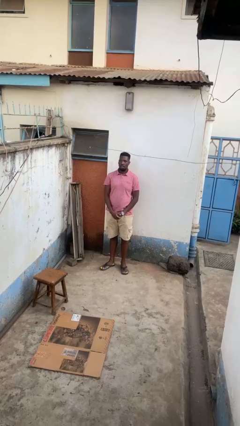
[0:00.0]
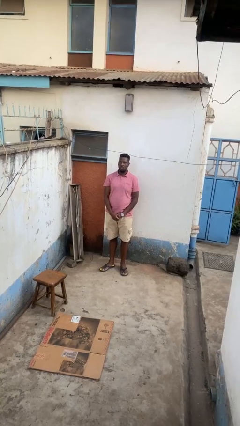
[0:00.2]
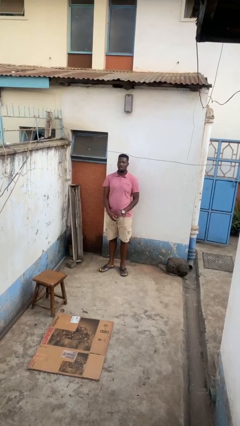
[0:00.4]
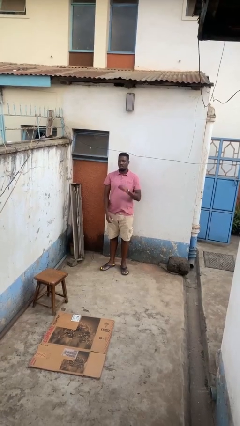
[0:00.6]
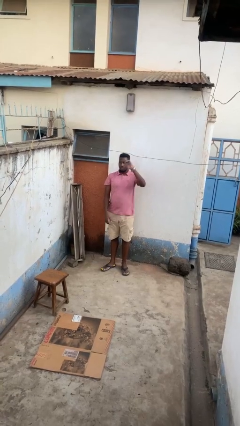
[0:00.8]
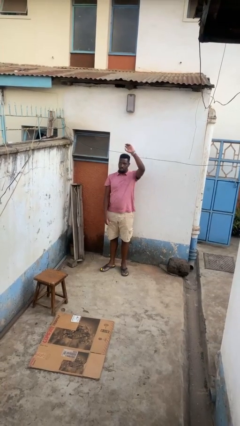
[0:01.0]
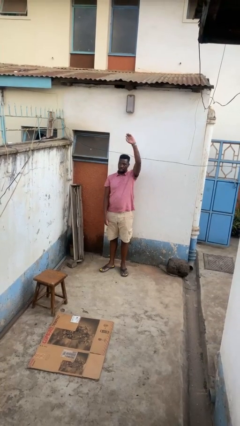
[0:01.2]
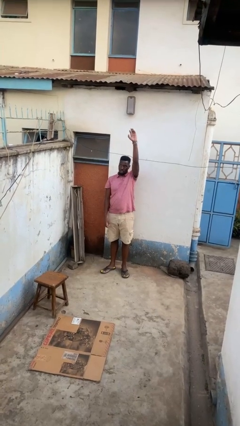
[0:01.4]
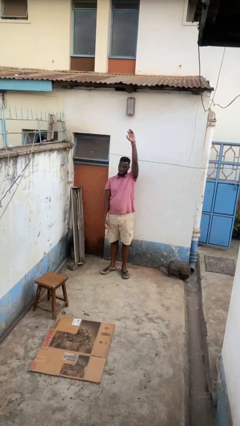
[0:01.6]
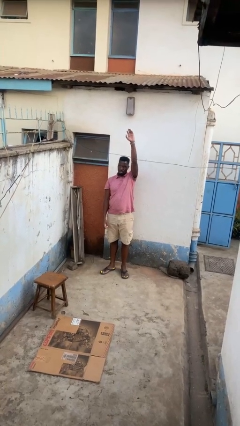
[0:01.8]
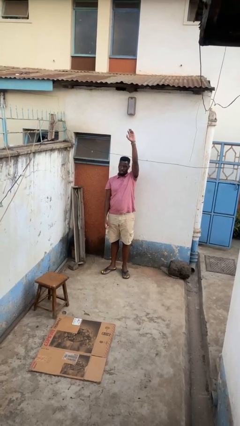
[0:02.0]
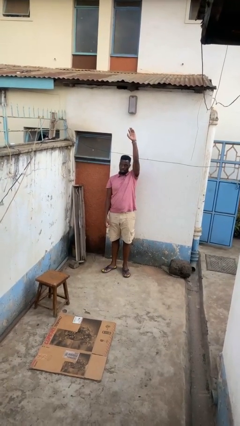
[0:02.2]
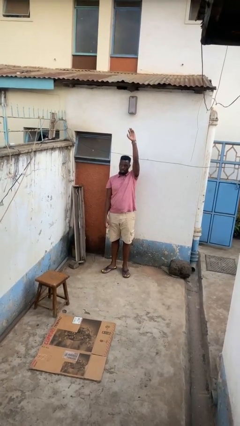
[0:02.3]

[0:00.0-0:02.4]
person gestures raise hand

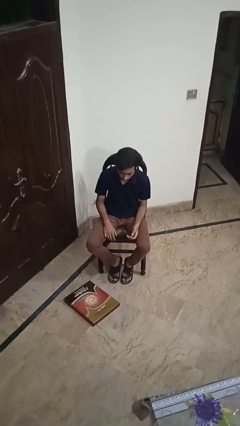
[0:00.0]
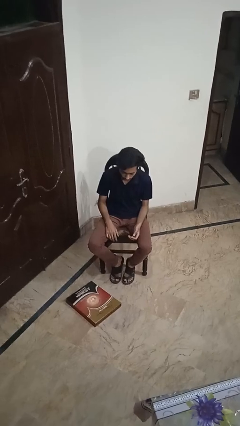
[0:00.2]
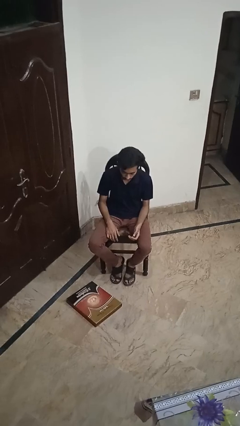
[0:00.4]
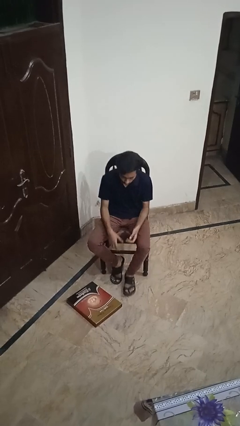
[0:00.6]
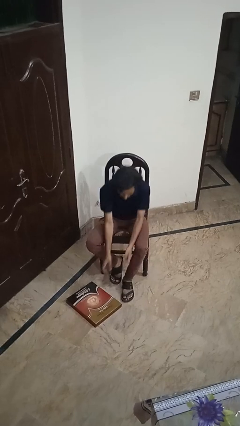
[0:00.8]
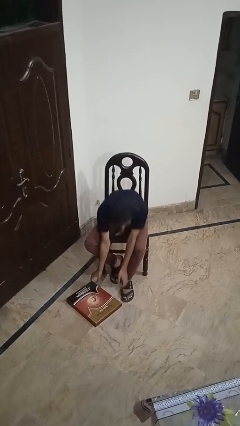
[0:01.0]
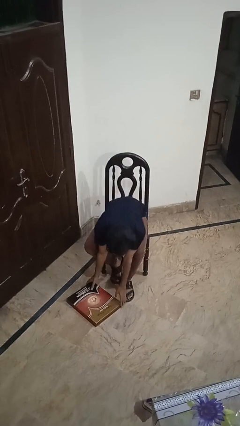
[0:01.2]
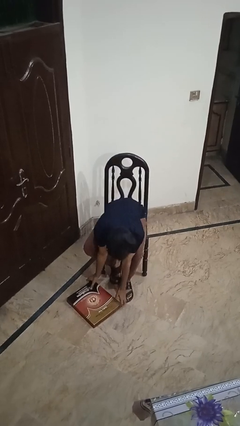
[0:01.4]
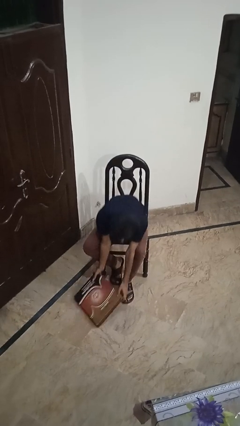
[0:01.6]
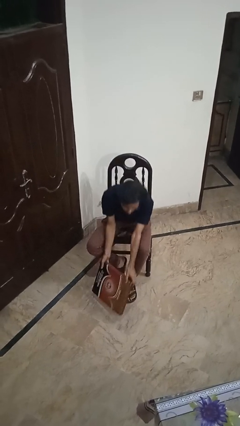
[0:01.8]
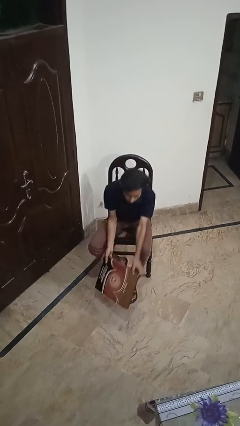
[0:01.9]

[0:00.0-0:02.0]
person picks up object from floor

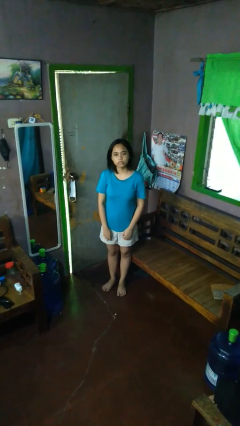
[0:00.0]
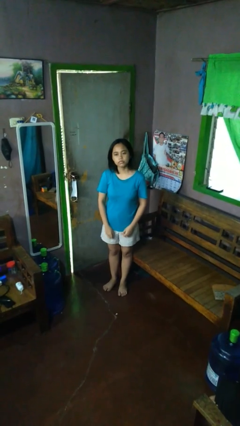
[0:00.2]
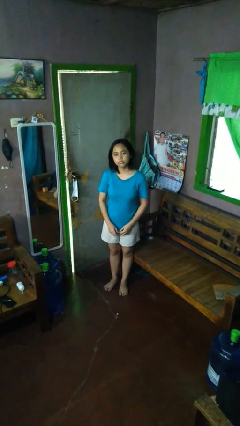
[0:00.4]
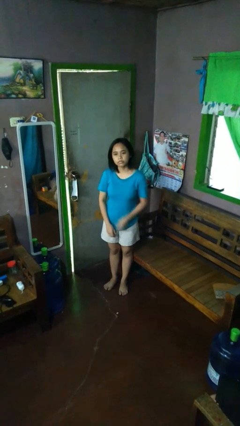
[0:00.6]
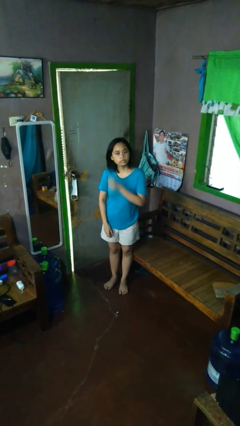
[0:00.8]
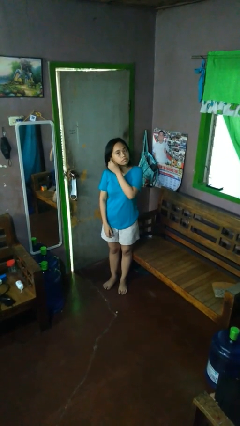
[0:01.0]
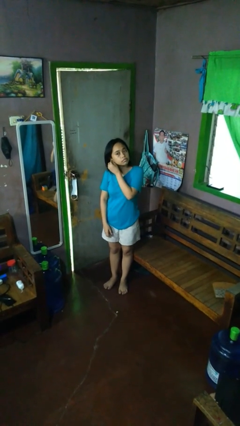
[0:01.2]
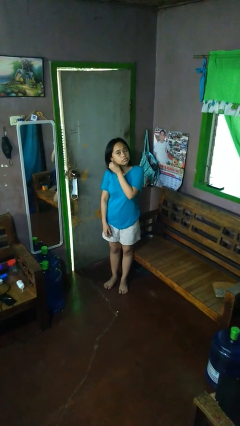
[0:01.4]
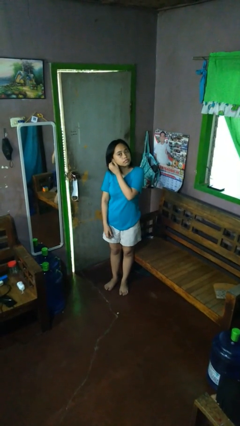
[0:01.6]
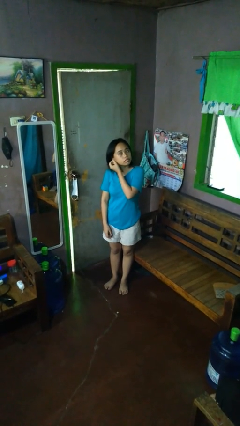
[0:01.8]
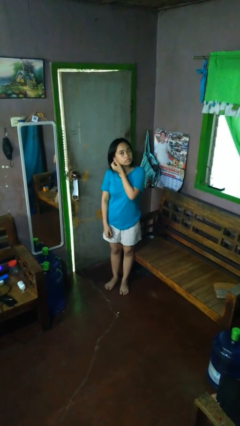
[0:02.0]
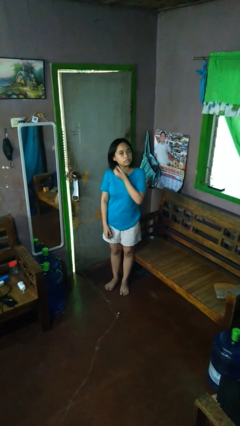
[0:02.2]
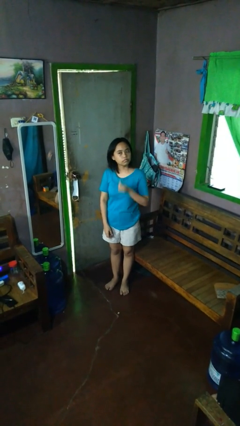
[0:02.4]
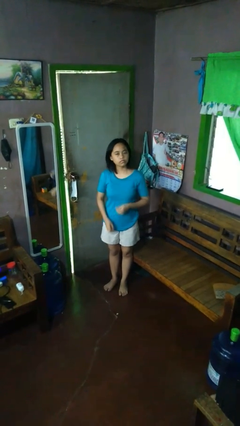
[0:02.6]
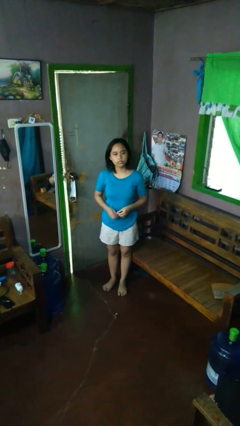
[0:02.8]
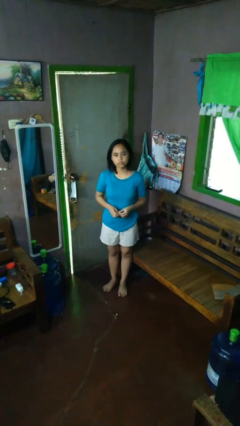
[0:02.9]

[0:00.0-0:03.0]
person takes off earrings

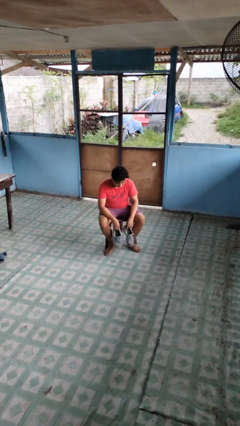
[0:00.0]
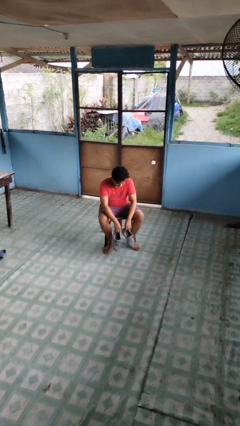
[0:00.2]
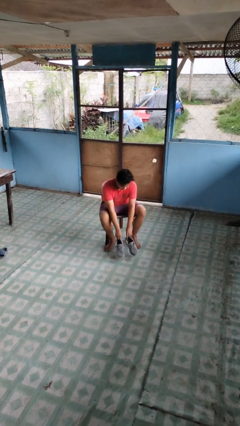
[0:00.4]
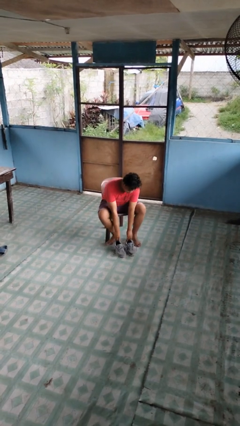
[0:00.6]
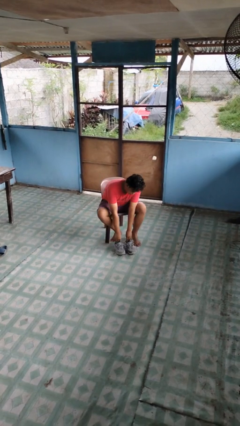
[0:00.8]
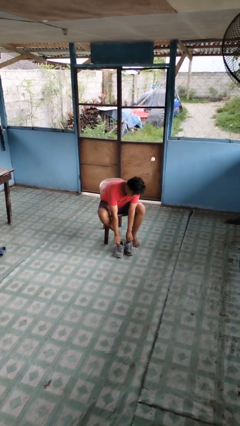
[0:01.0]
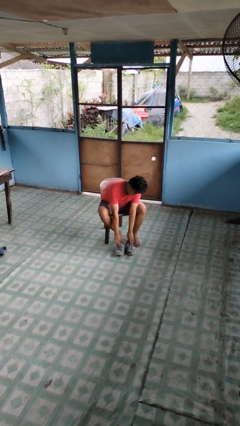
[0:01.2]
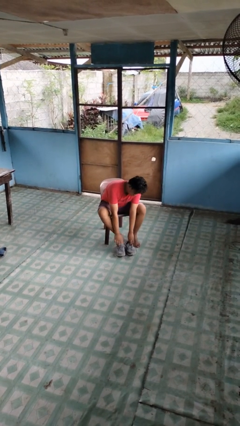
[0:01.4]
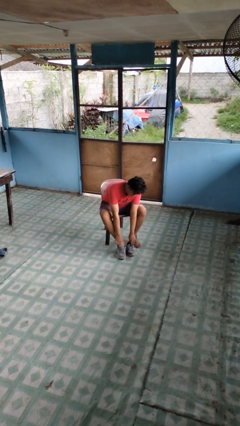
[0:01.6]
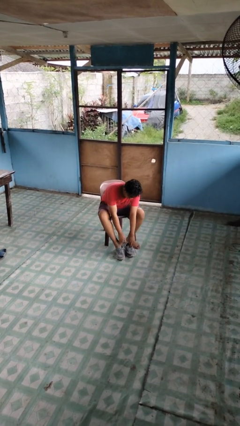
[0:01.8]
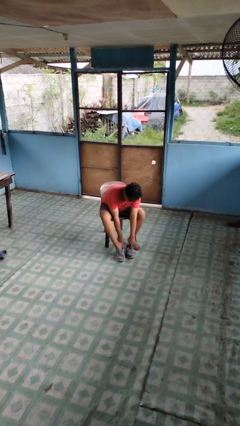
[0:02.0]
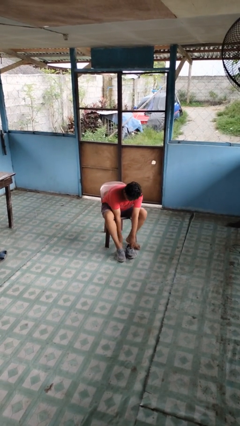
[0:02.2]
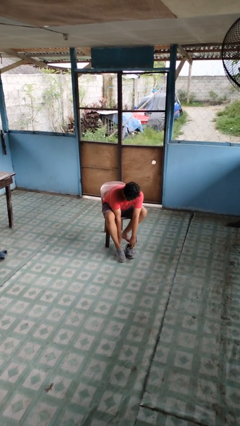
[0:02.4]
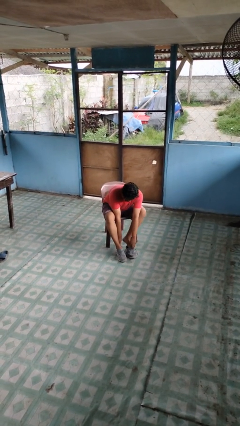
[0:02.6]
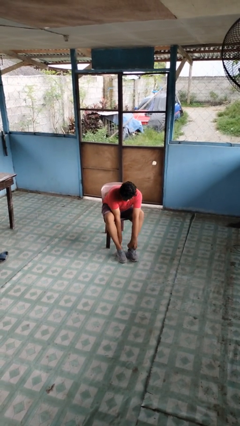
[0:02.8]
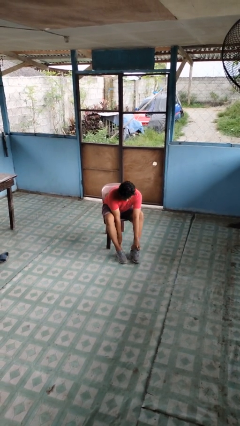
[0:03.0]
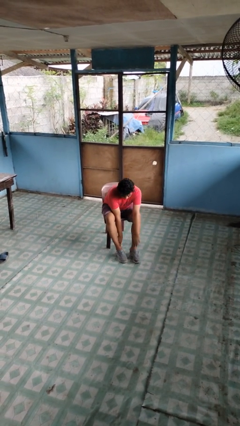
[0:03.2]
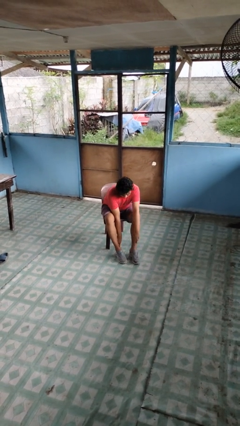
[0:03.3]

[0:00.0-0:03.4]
person puts on shoes

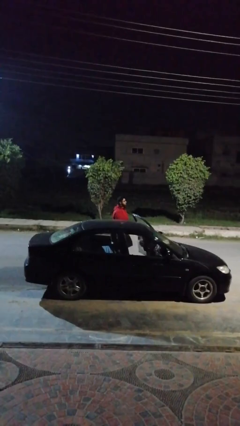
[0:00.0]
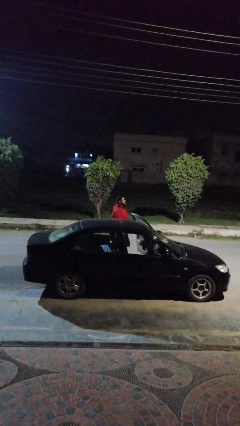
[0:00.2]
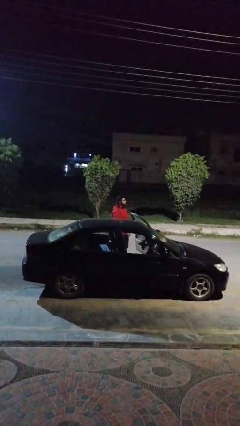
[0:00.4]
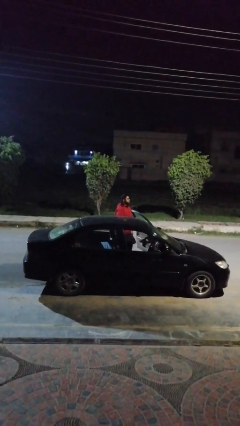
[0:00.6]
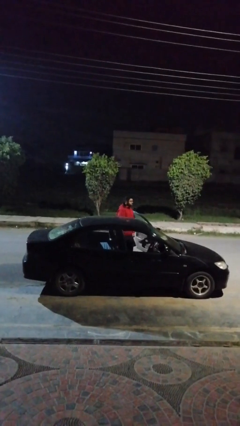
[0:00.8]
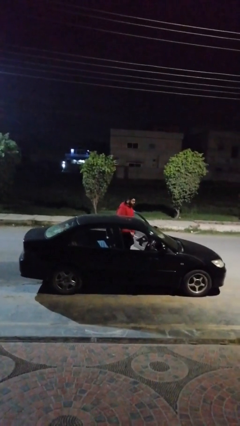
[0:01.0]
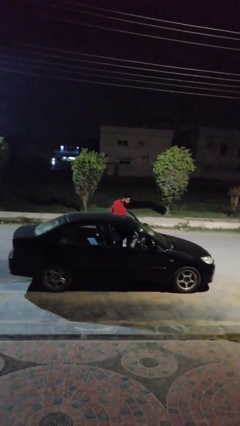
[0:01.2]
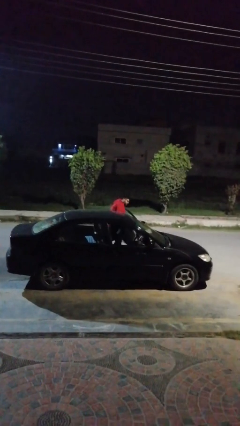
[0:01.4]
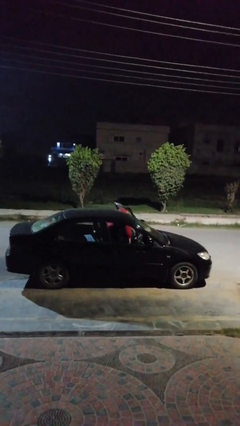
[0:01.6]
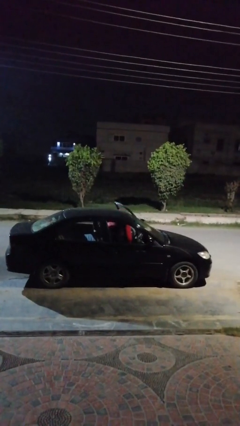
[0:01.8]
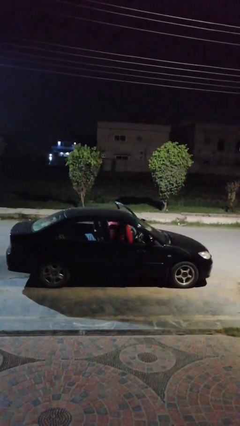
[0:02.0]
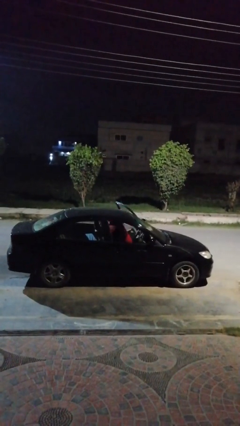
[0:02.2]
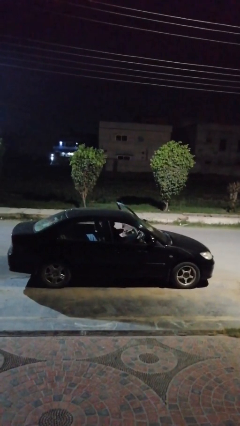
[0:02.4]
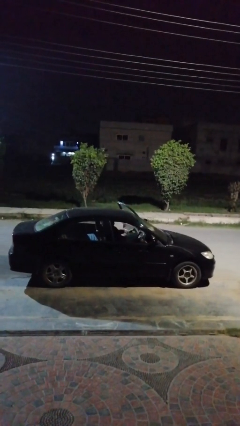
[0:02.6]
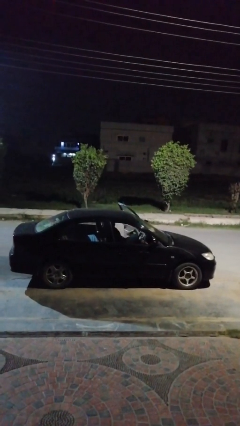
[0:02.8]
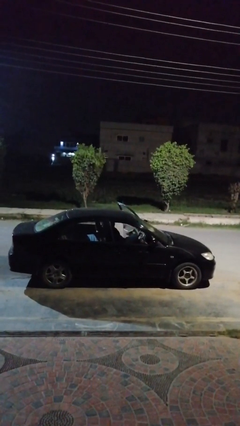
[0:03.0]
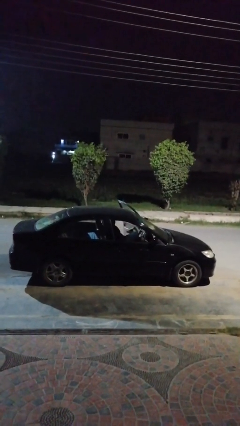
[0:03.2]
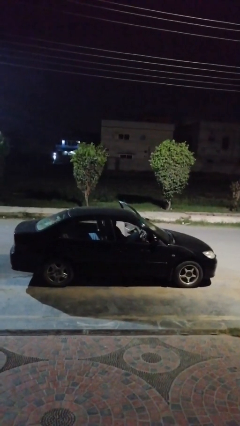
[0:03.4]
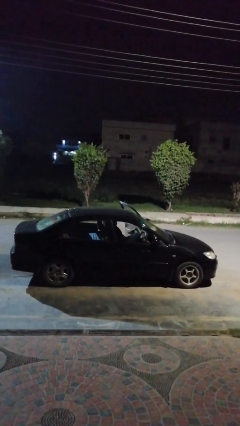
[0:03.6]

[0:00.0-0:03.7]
person enters car

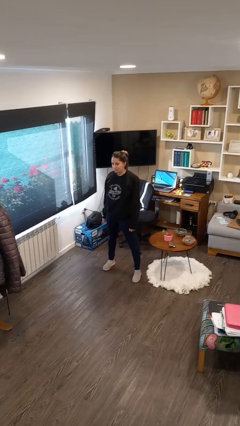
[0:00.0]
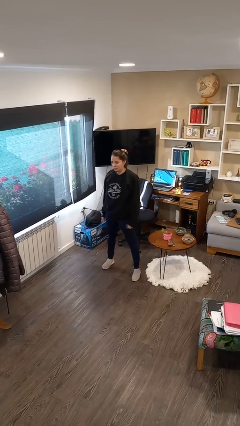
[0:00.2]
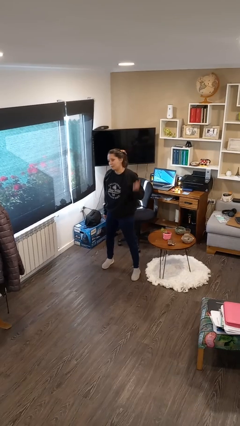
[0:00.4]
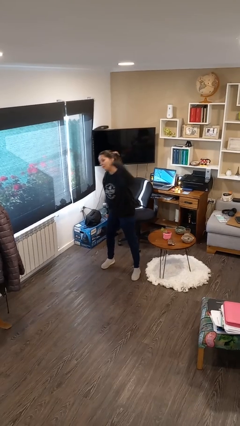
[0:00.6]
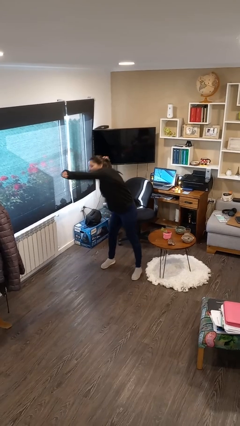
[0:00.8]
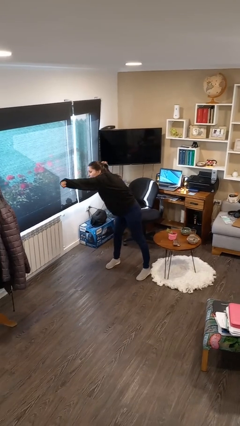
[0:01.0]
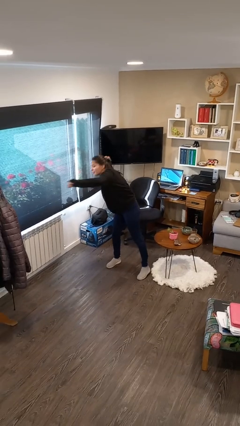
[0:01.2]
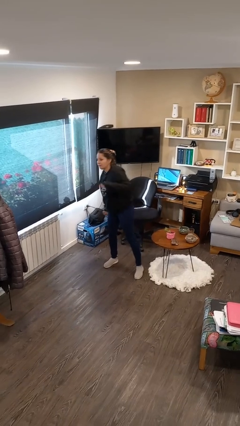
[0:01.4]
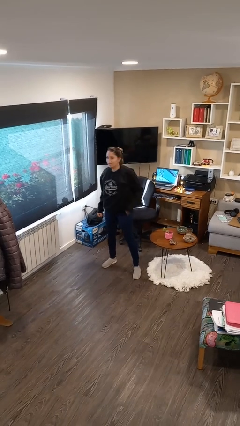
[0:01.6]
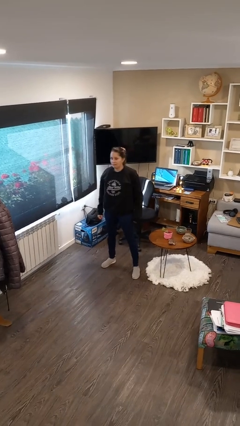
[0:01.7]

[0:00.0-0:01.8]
person punches

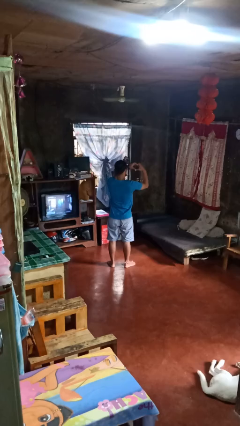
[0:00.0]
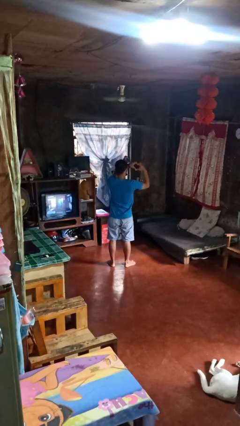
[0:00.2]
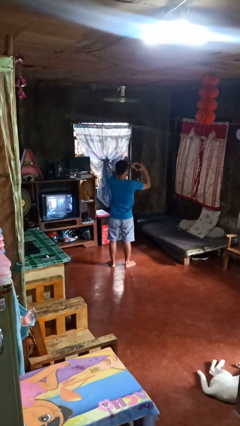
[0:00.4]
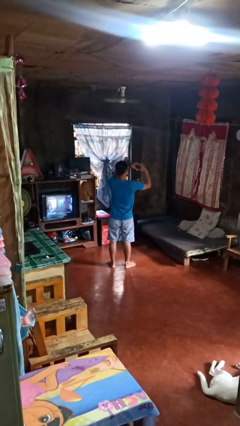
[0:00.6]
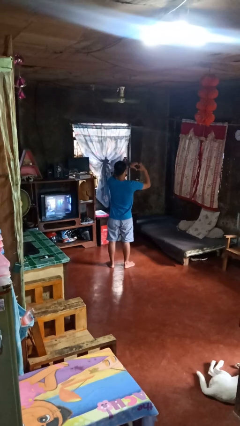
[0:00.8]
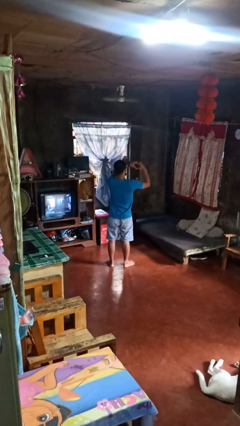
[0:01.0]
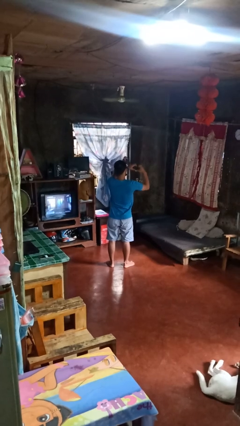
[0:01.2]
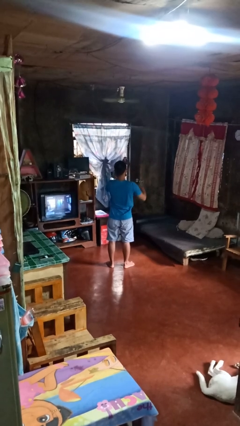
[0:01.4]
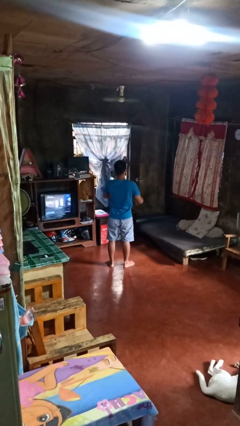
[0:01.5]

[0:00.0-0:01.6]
person gestures heart
